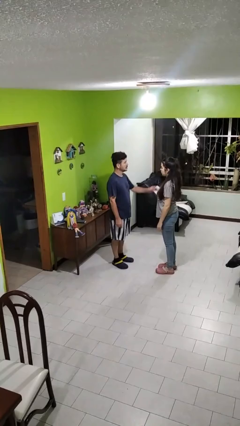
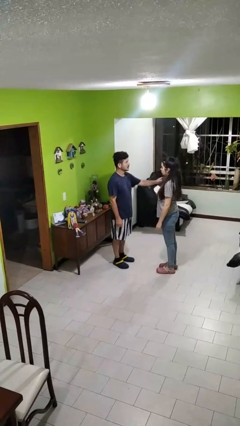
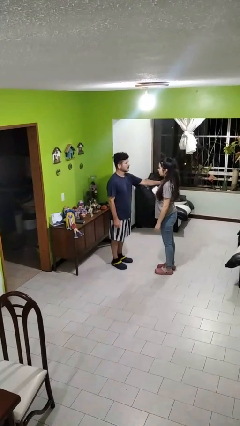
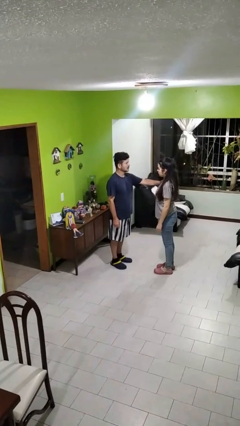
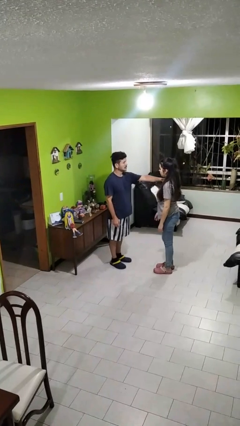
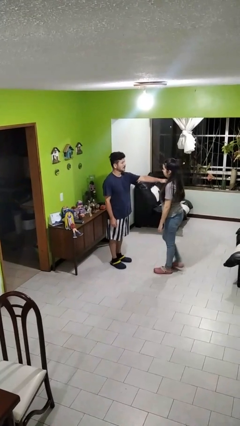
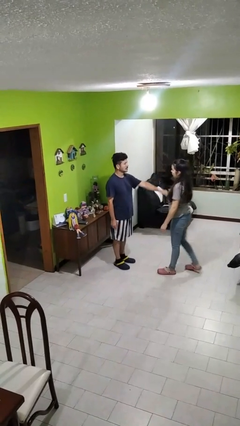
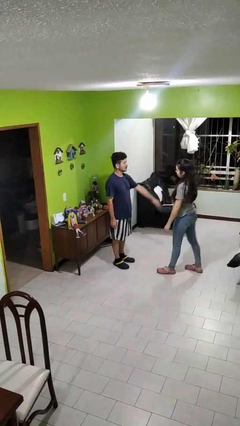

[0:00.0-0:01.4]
person shoves person

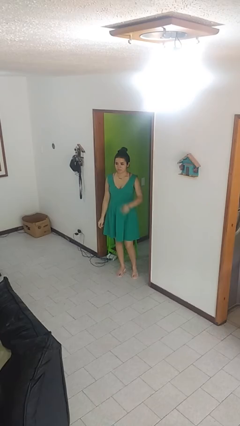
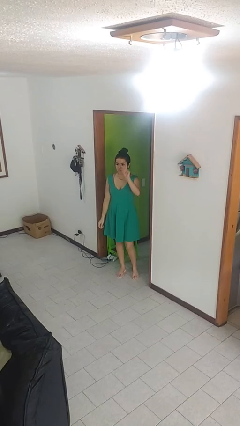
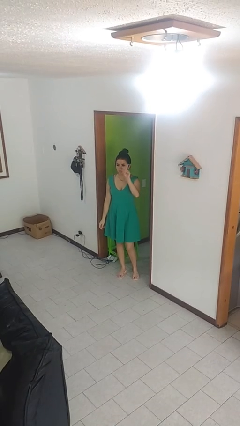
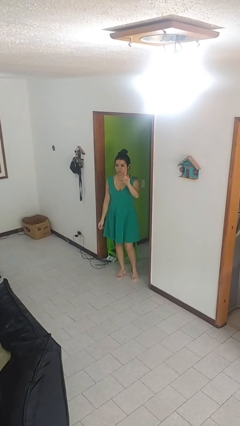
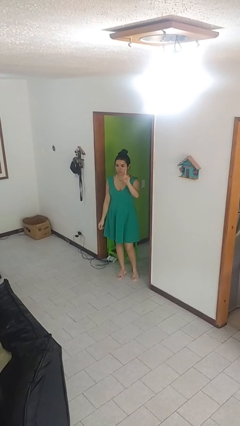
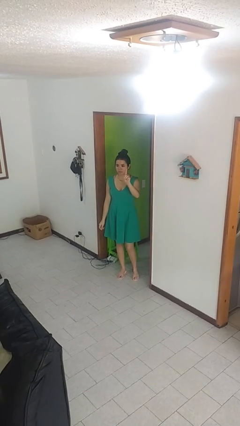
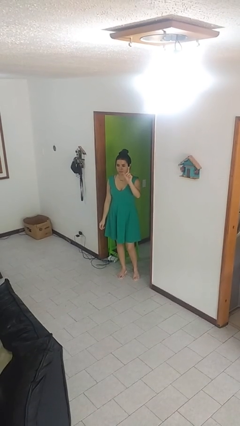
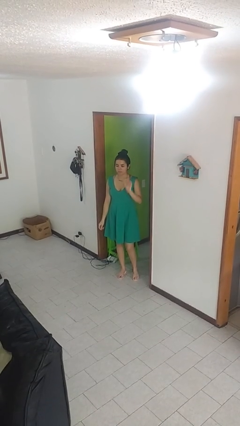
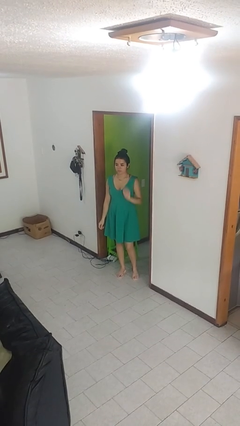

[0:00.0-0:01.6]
person gestures number one

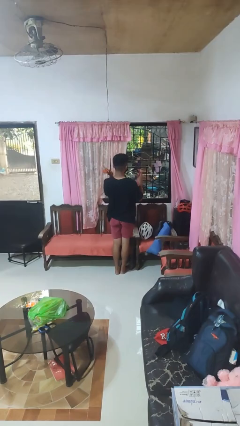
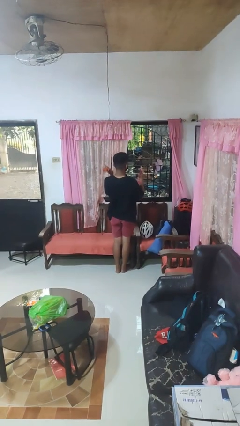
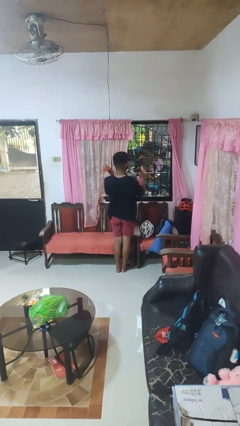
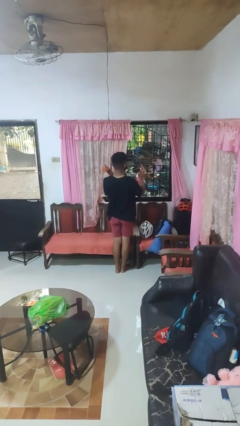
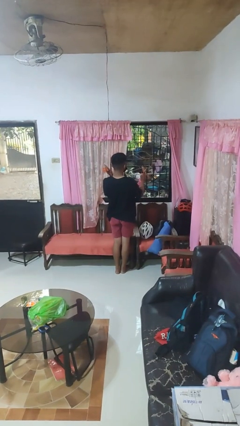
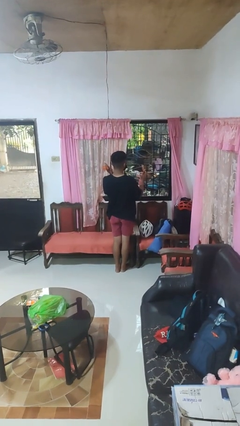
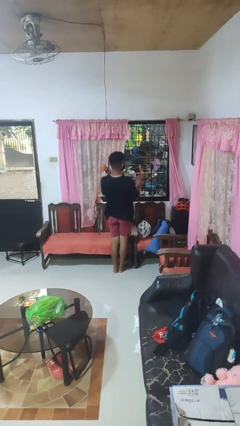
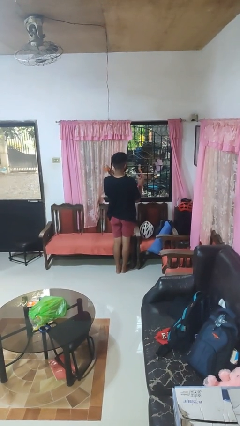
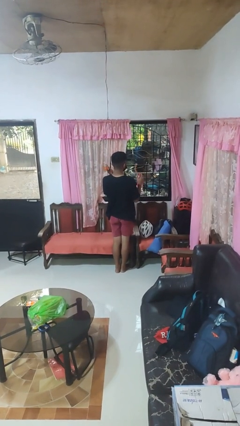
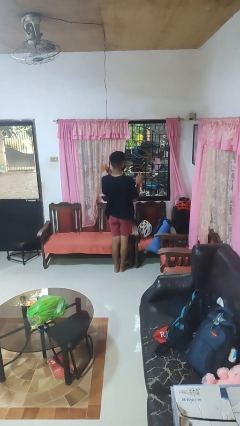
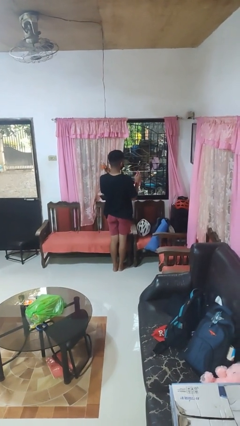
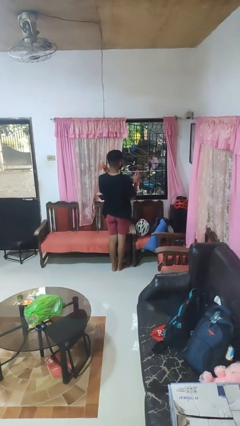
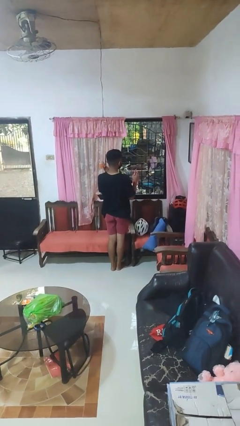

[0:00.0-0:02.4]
person sprays from bottle

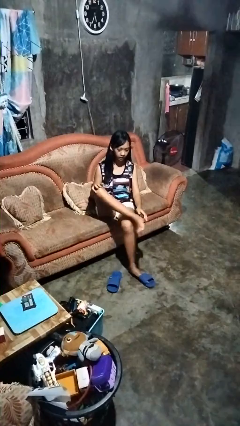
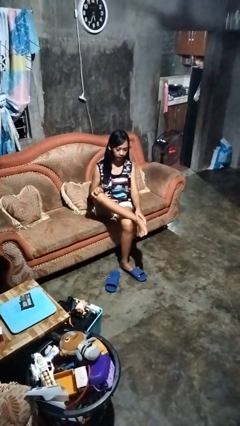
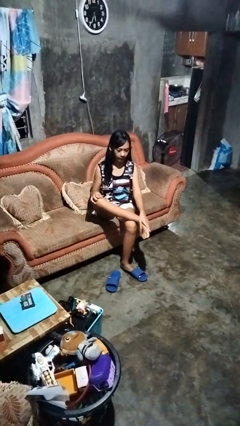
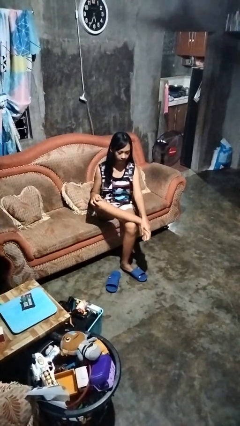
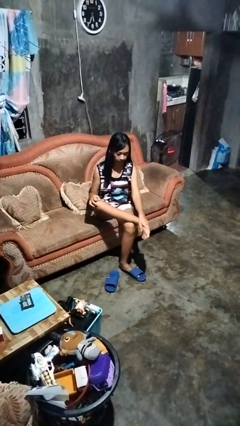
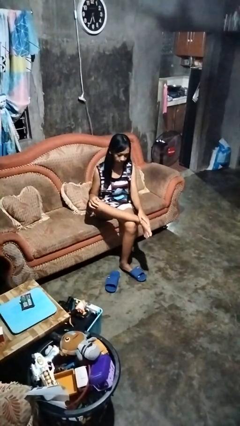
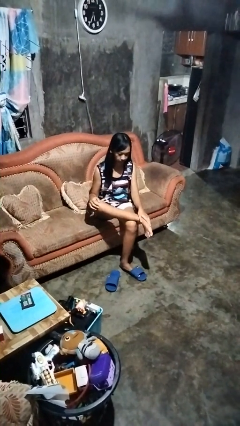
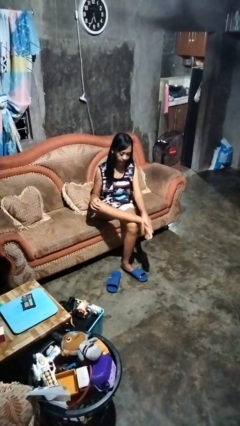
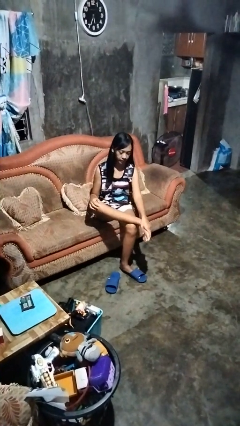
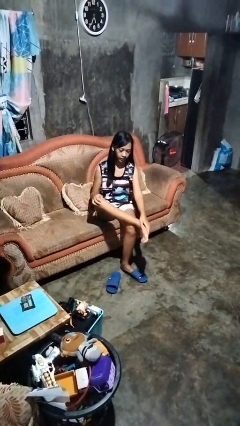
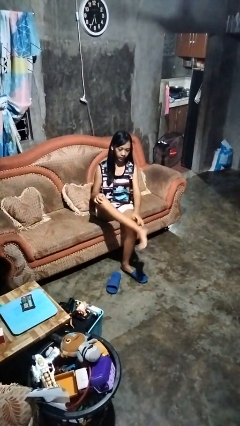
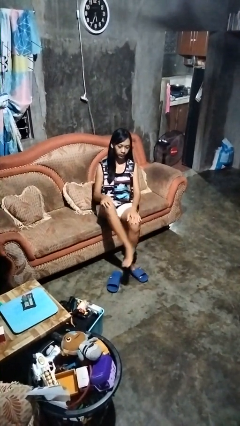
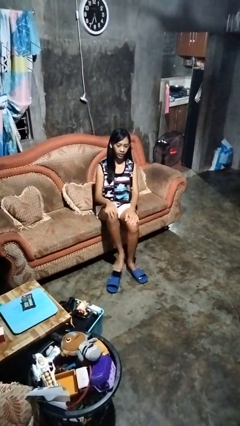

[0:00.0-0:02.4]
person rubs foot

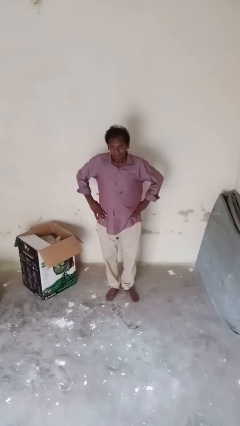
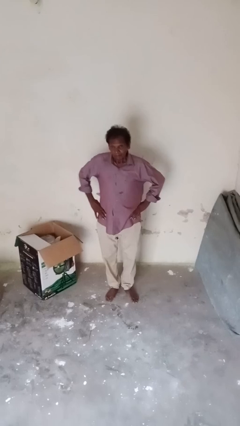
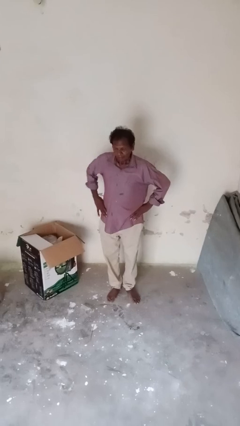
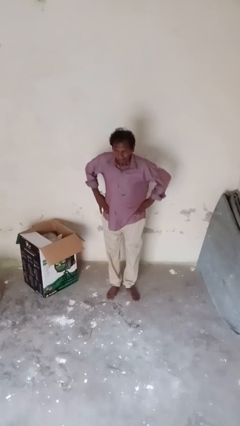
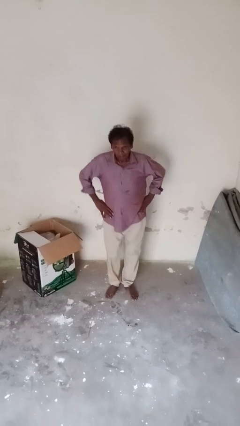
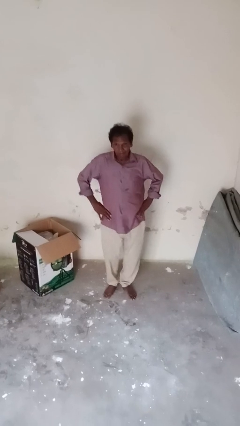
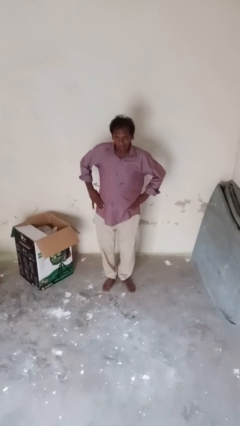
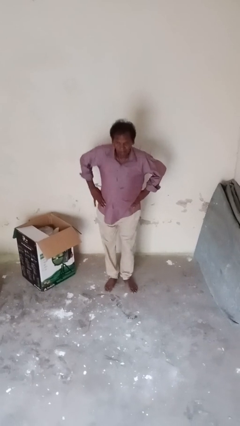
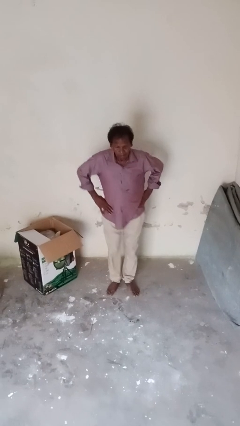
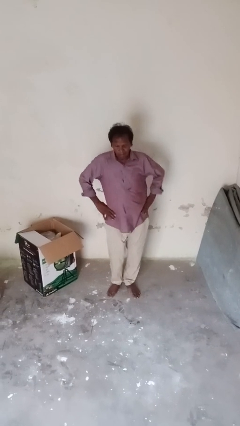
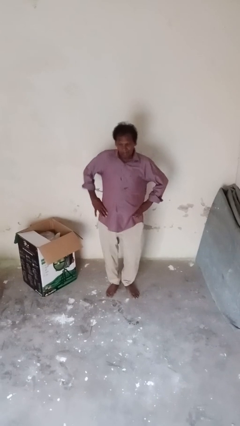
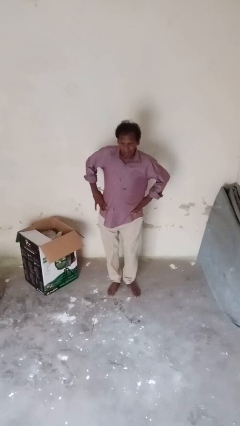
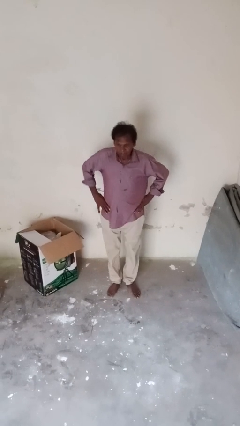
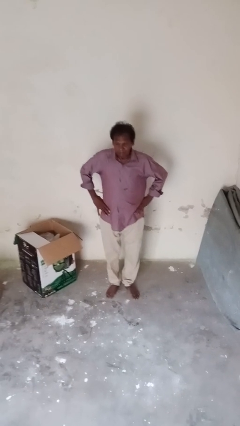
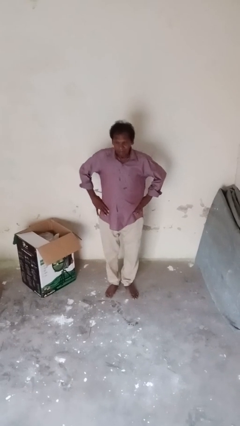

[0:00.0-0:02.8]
person wiggles hips

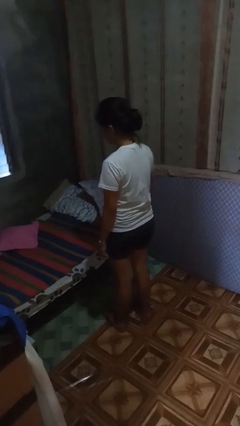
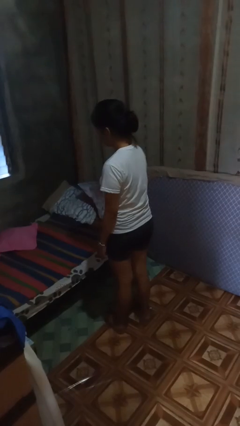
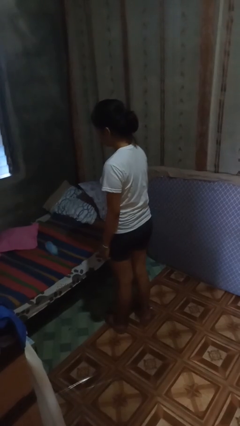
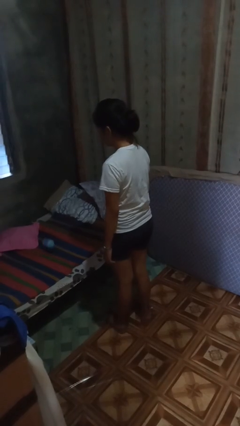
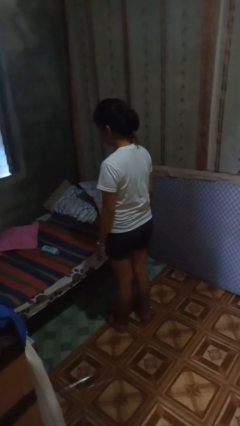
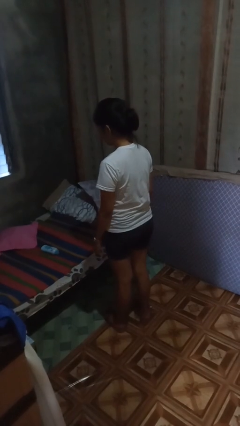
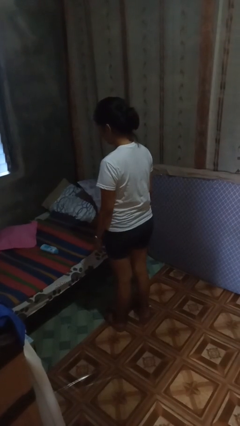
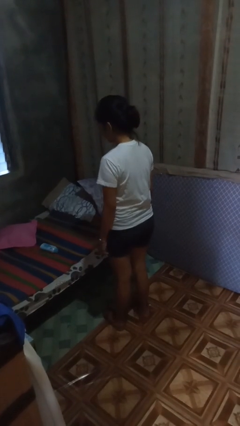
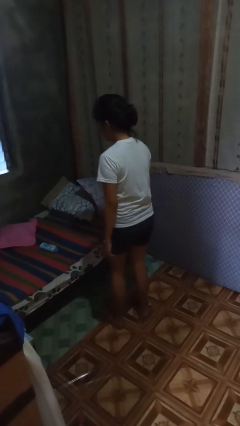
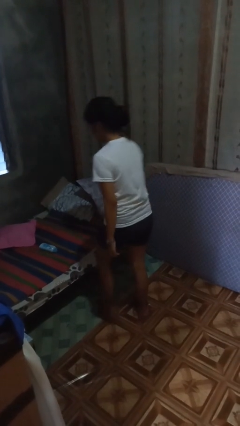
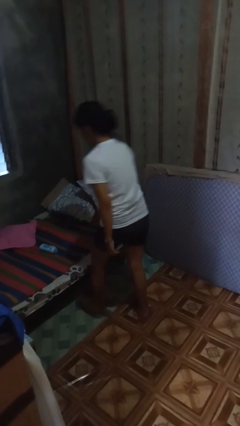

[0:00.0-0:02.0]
person throws object on bed

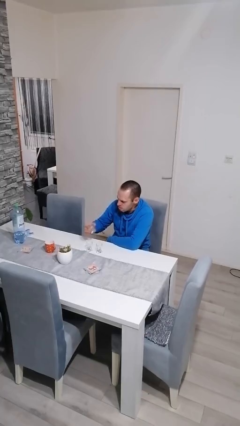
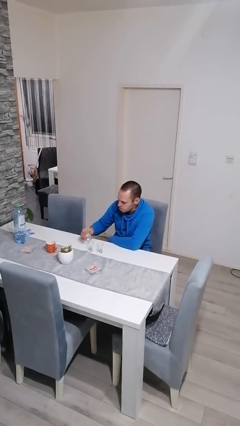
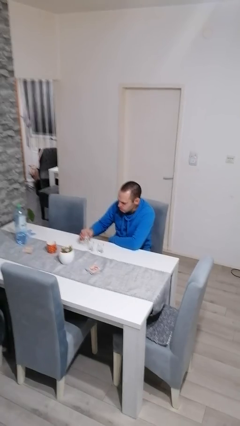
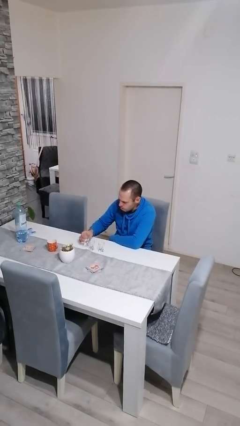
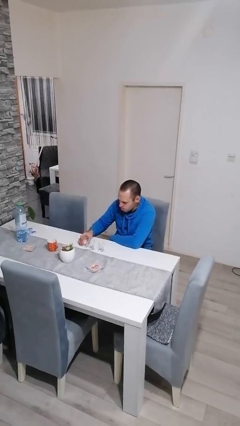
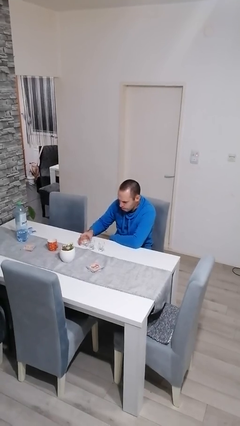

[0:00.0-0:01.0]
person puts down object on table

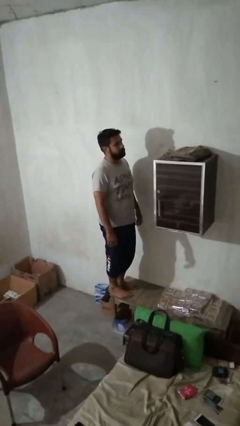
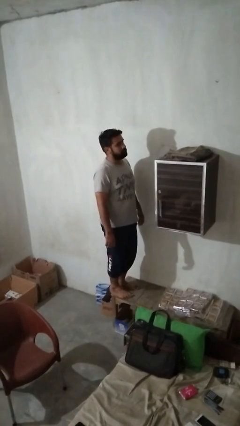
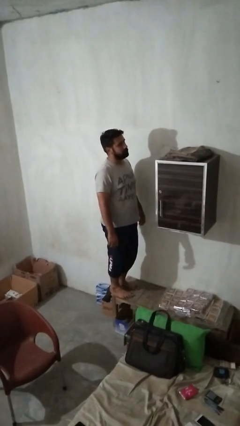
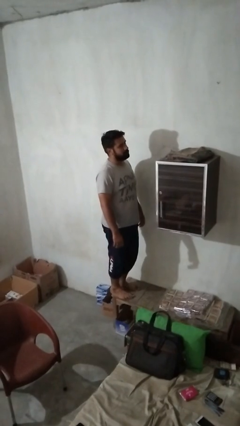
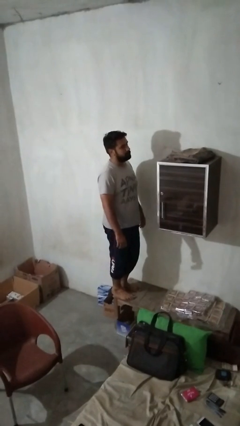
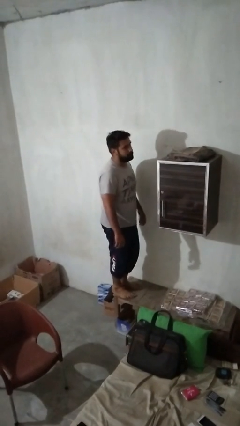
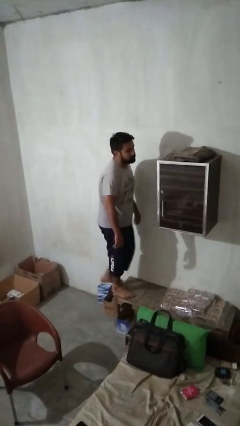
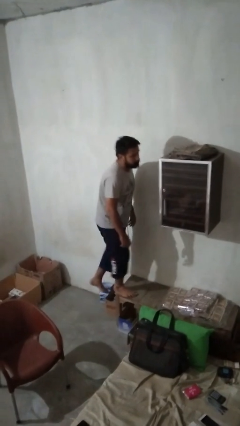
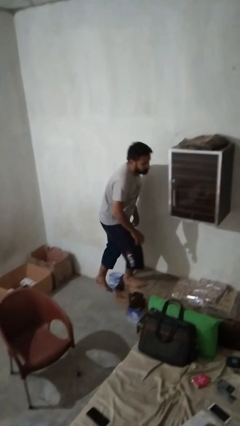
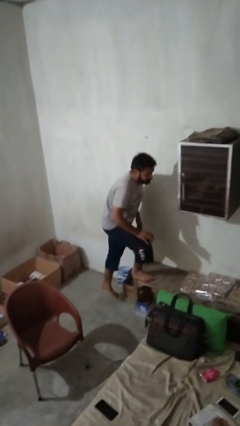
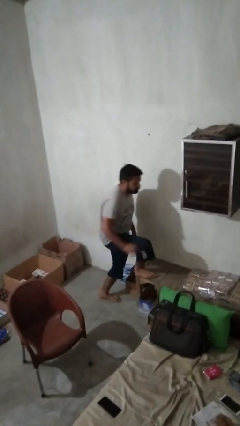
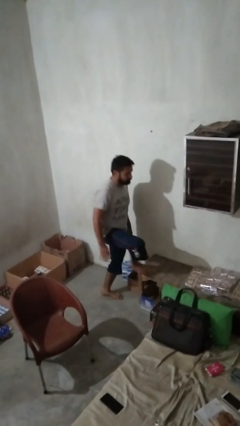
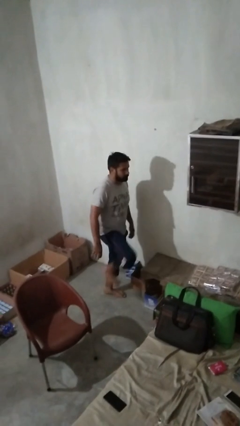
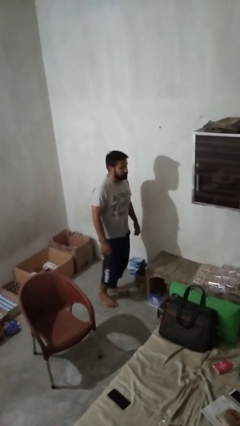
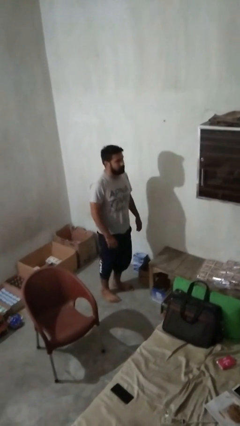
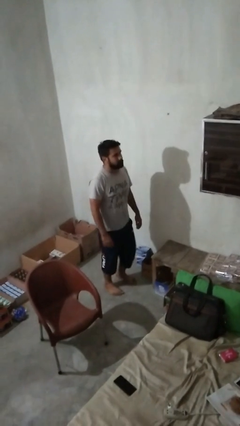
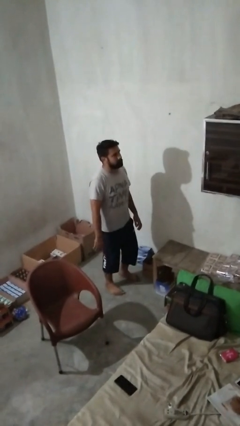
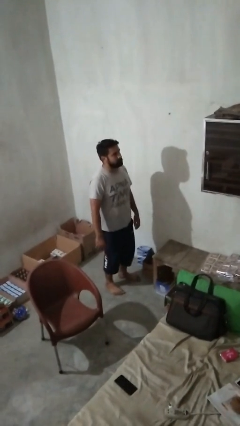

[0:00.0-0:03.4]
person climbs off table
